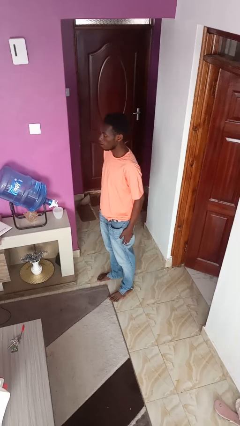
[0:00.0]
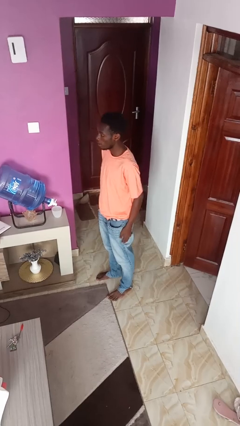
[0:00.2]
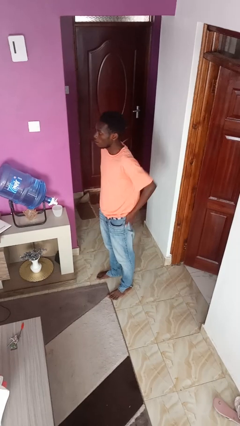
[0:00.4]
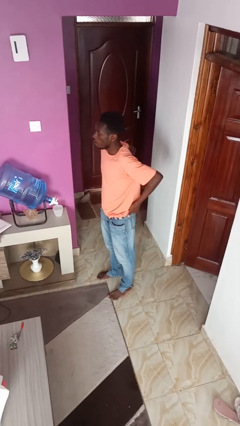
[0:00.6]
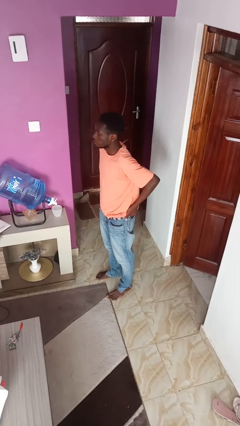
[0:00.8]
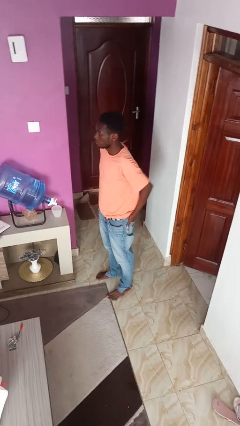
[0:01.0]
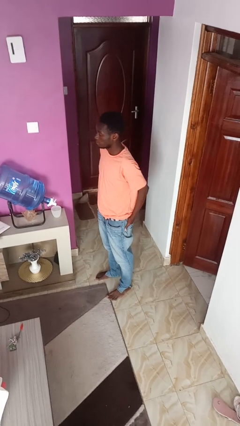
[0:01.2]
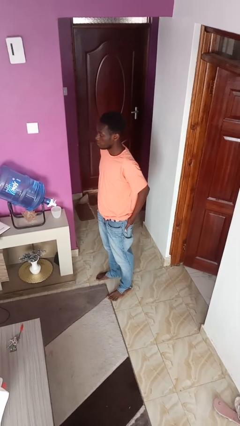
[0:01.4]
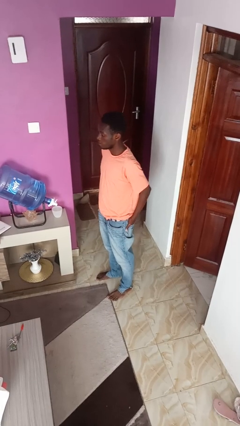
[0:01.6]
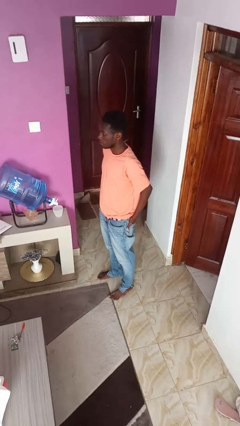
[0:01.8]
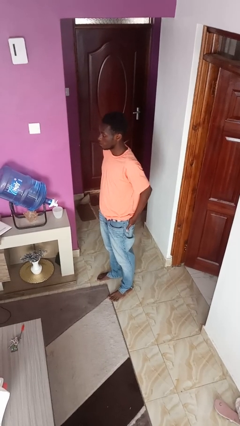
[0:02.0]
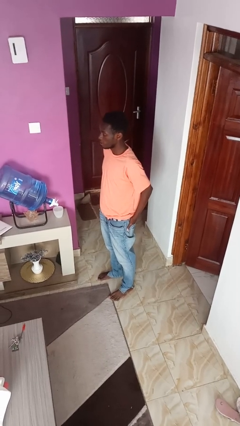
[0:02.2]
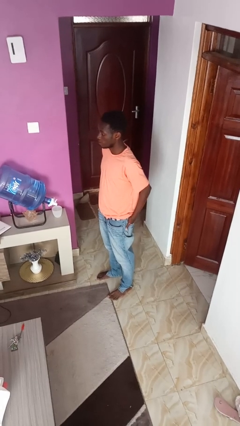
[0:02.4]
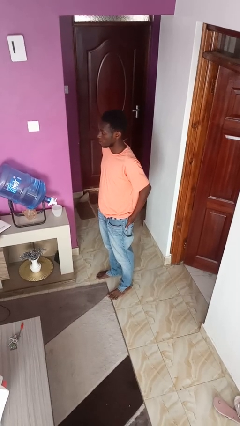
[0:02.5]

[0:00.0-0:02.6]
person puts hands in back pockets

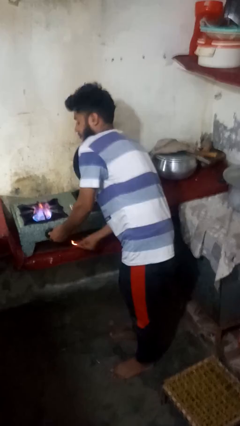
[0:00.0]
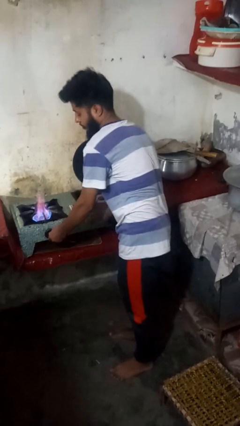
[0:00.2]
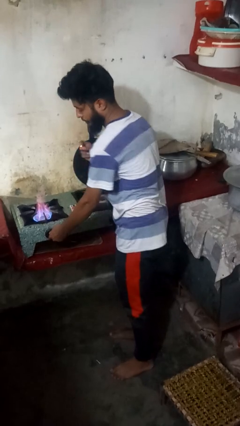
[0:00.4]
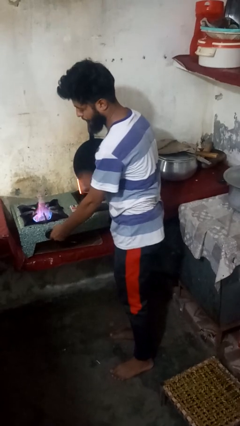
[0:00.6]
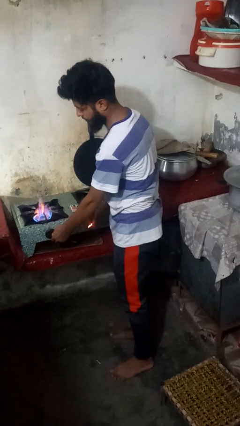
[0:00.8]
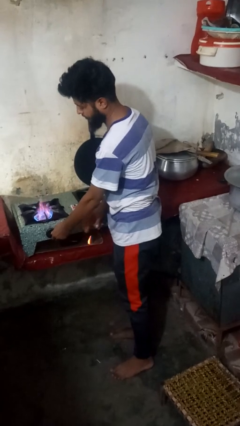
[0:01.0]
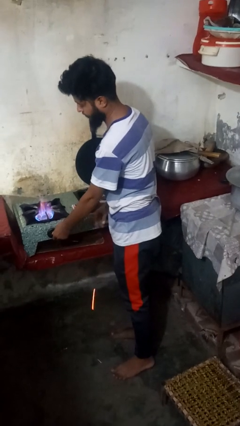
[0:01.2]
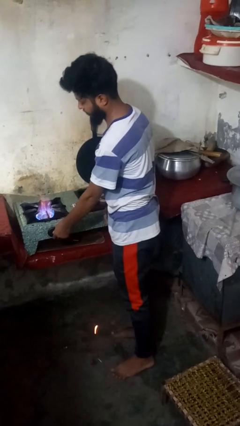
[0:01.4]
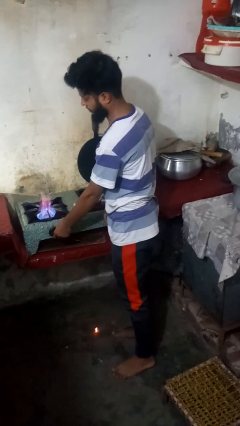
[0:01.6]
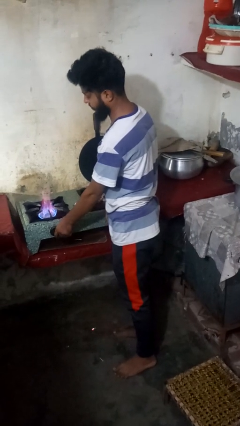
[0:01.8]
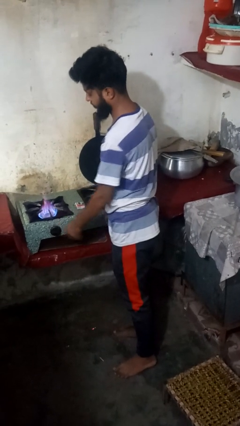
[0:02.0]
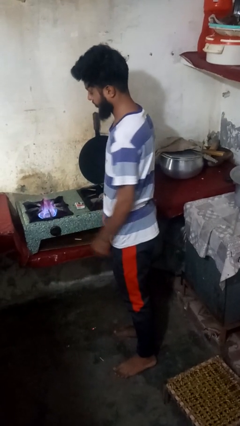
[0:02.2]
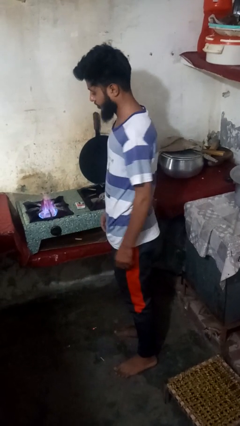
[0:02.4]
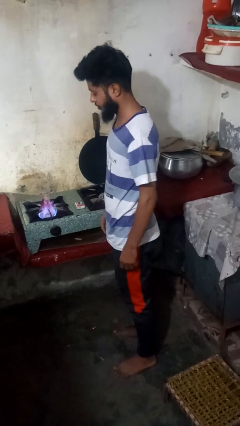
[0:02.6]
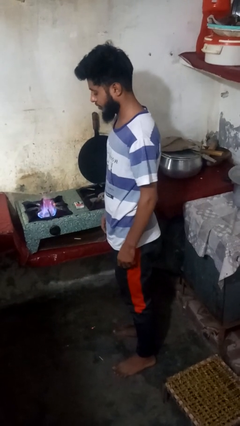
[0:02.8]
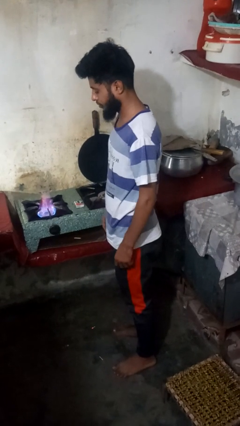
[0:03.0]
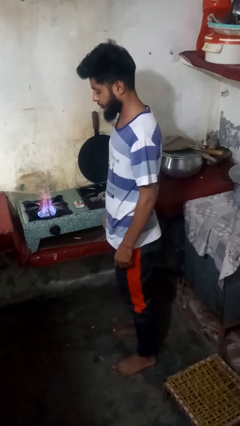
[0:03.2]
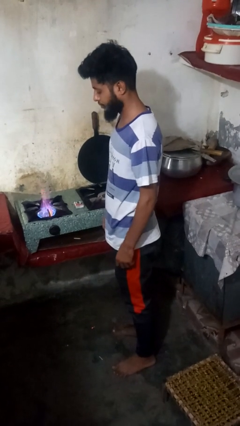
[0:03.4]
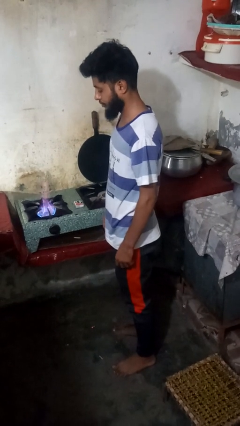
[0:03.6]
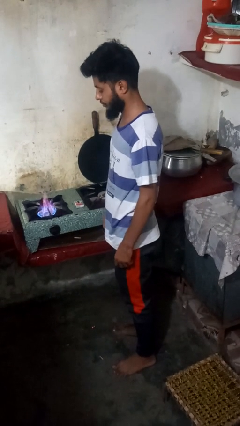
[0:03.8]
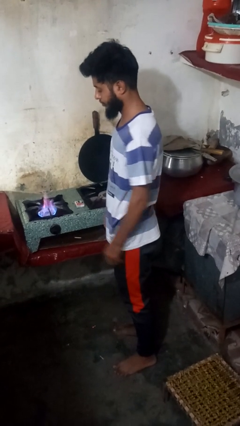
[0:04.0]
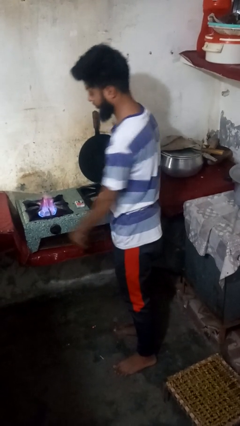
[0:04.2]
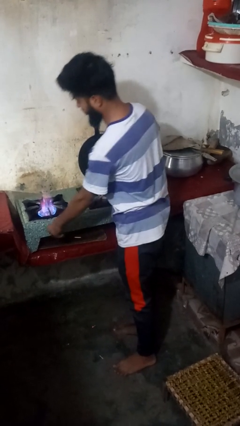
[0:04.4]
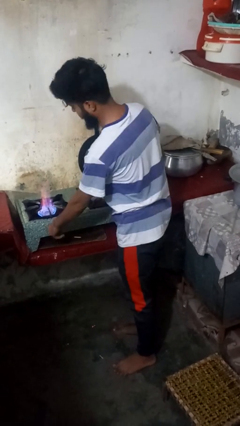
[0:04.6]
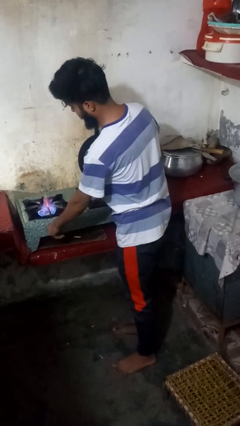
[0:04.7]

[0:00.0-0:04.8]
person turns on stovetop

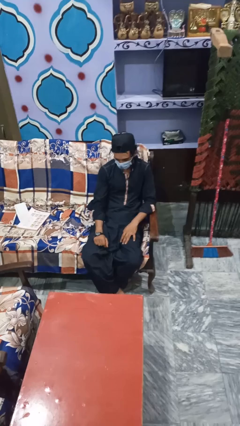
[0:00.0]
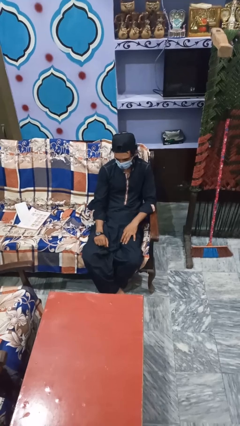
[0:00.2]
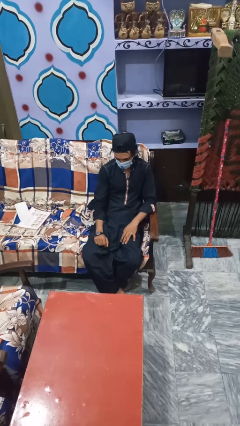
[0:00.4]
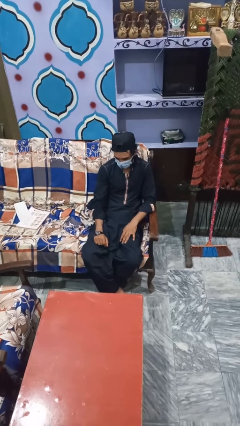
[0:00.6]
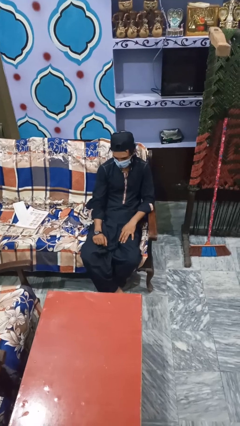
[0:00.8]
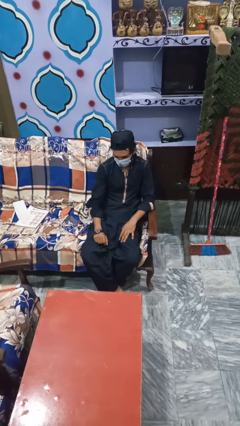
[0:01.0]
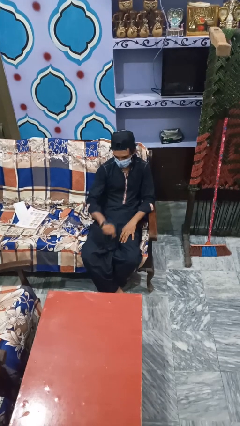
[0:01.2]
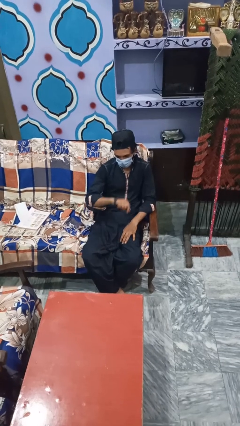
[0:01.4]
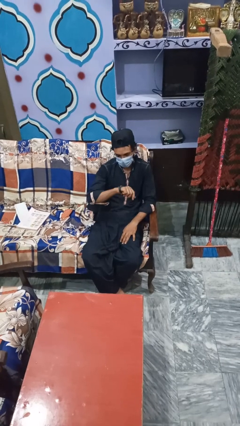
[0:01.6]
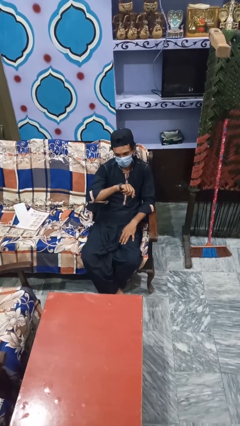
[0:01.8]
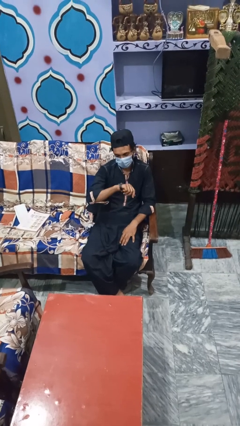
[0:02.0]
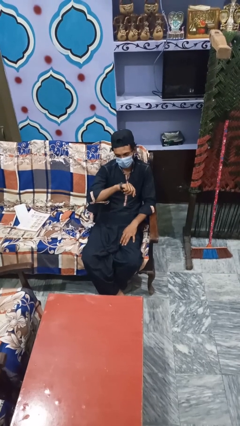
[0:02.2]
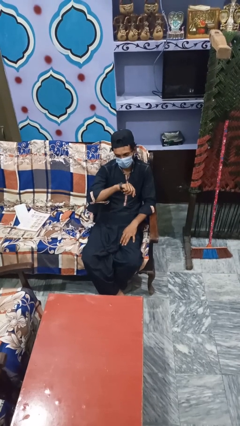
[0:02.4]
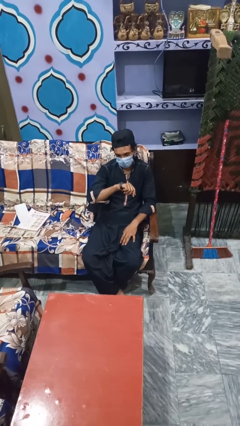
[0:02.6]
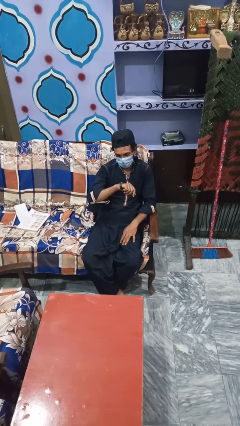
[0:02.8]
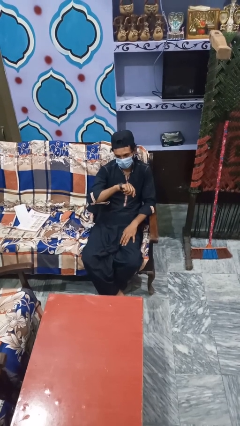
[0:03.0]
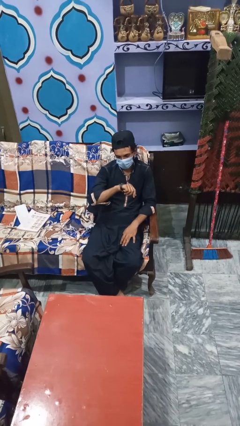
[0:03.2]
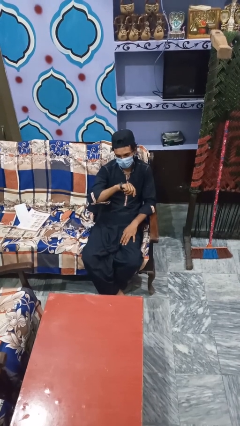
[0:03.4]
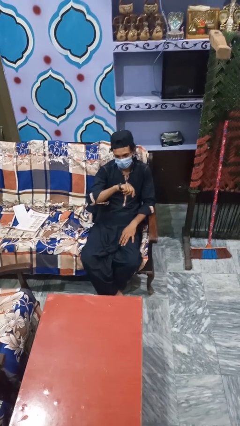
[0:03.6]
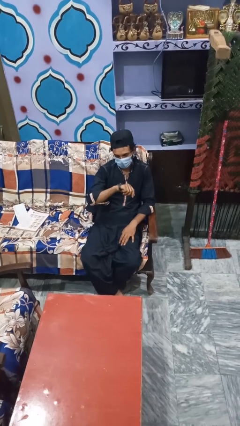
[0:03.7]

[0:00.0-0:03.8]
person looks at wristwatch

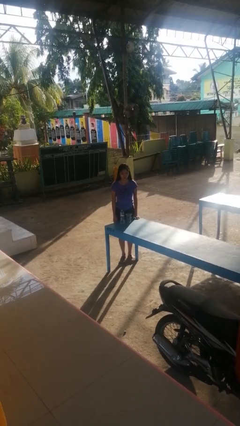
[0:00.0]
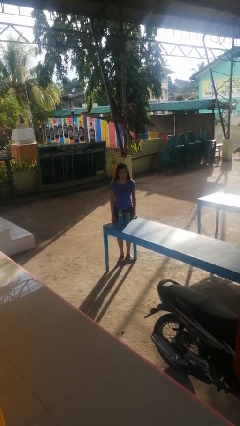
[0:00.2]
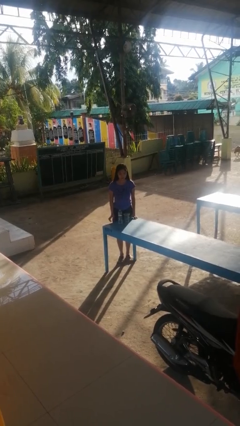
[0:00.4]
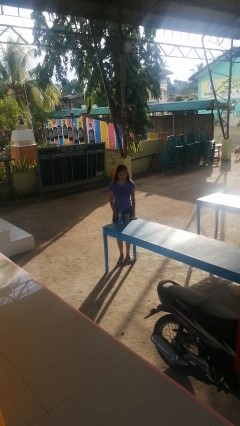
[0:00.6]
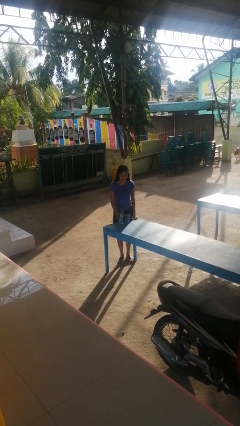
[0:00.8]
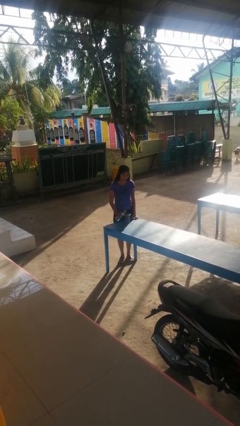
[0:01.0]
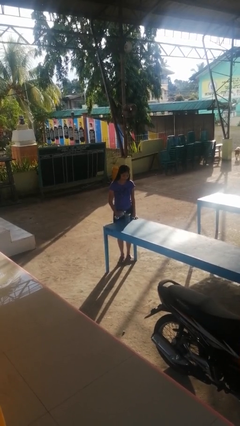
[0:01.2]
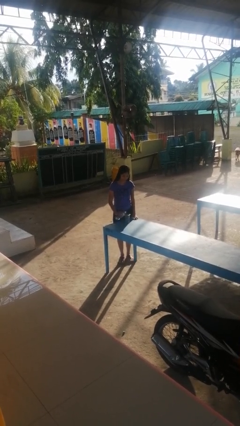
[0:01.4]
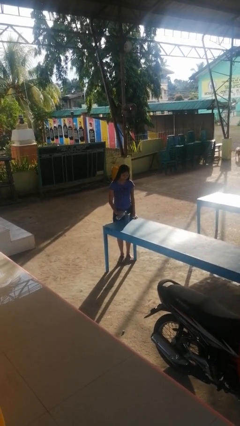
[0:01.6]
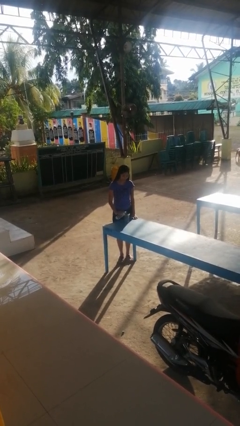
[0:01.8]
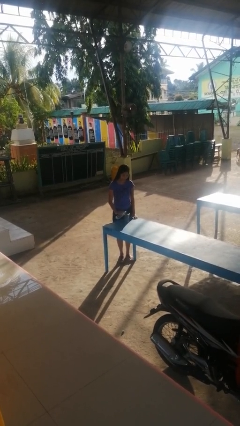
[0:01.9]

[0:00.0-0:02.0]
person pours liquid into cup

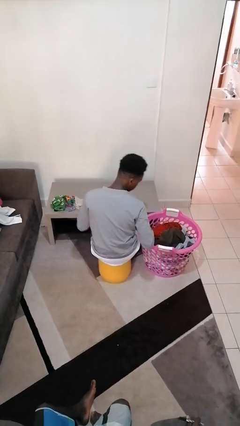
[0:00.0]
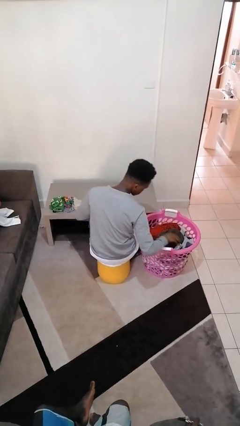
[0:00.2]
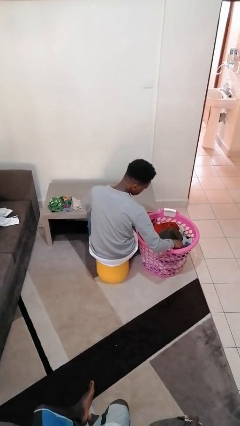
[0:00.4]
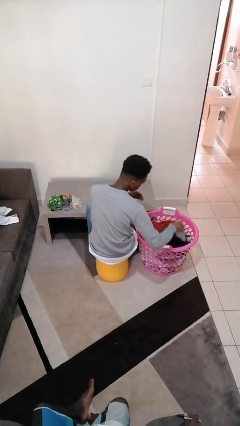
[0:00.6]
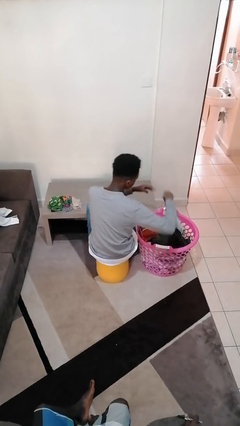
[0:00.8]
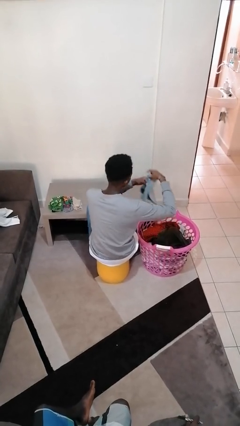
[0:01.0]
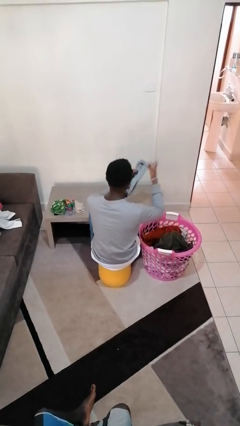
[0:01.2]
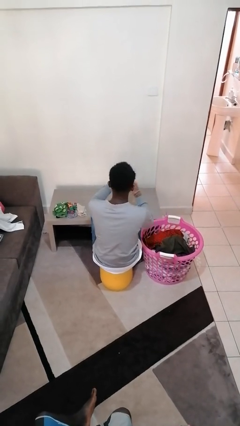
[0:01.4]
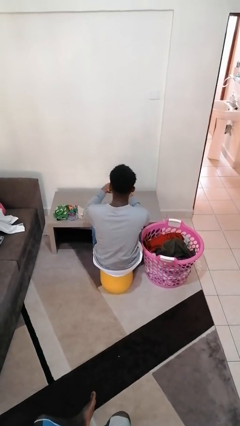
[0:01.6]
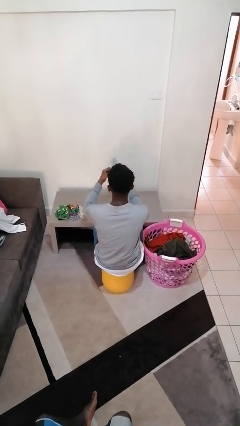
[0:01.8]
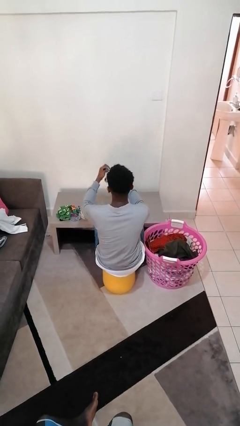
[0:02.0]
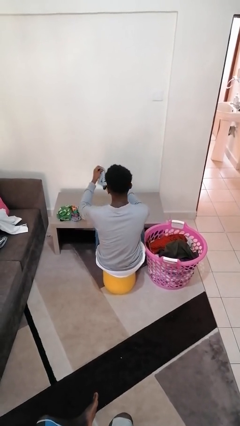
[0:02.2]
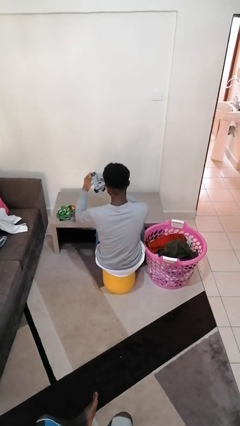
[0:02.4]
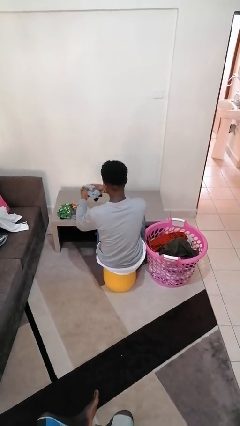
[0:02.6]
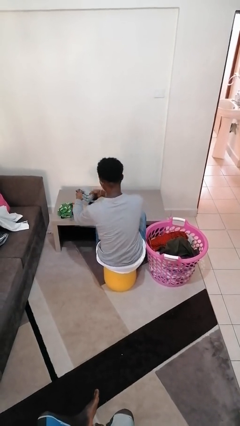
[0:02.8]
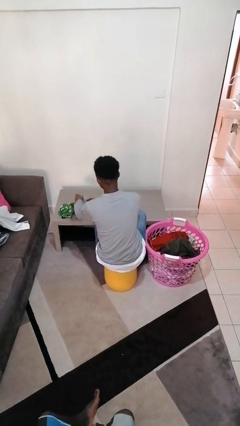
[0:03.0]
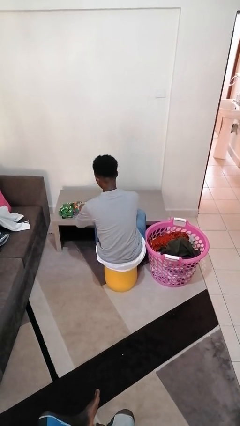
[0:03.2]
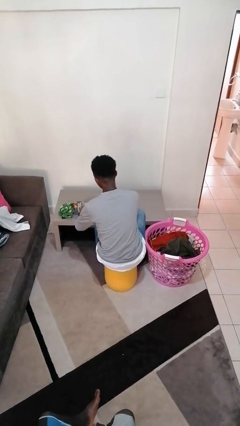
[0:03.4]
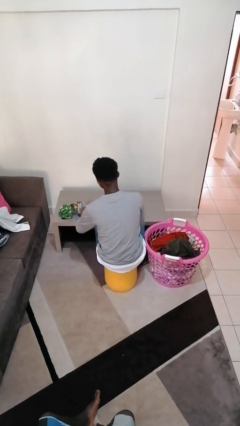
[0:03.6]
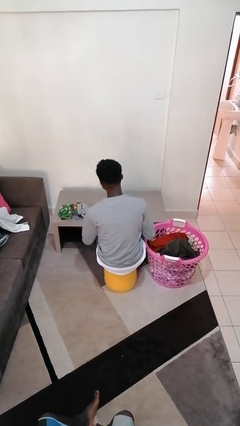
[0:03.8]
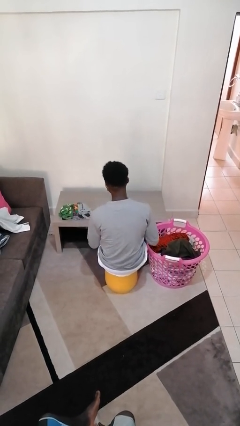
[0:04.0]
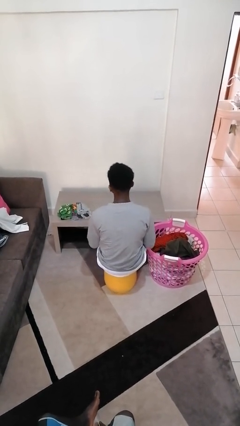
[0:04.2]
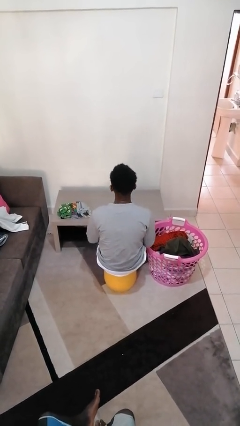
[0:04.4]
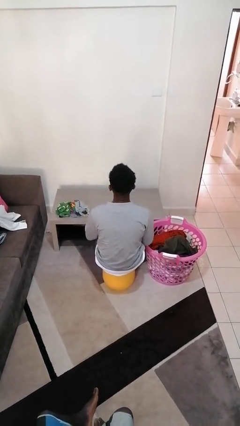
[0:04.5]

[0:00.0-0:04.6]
person folds socks
